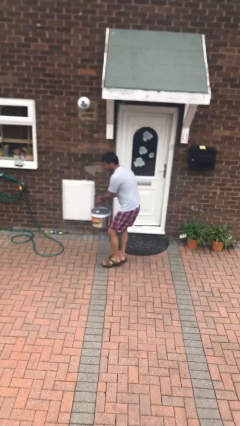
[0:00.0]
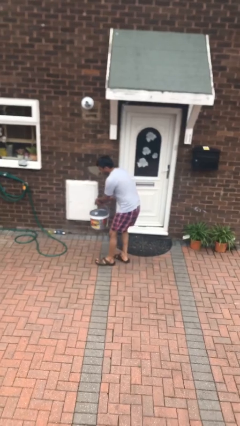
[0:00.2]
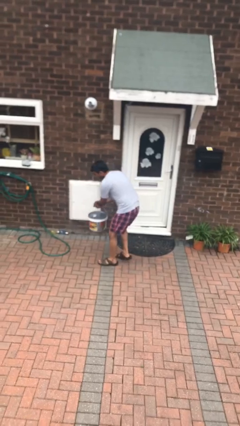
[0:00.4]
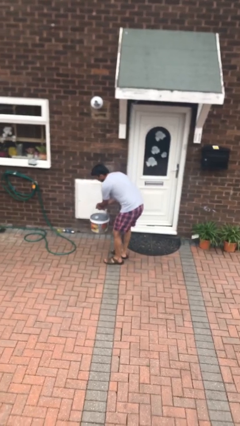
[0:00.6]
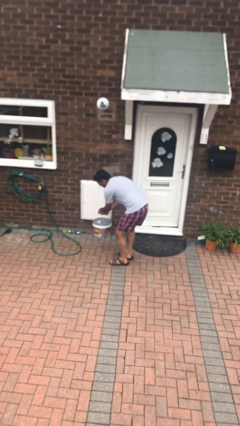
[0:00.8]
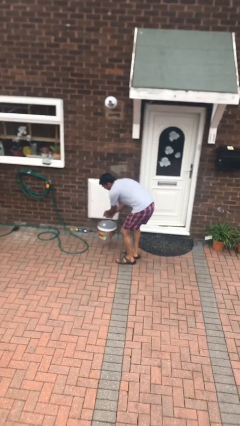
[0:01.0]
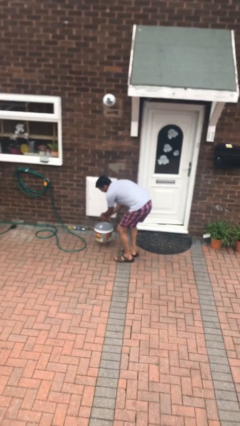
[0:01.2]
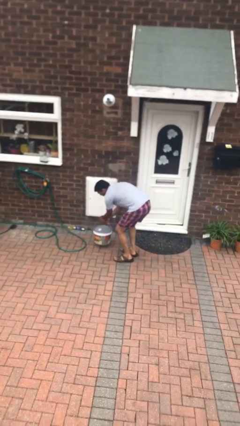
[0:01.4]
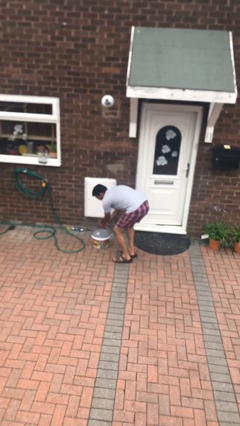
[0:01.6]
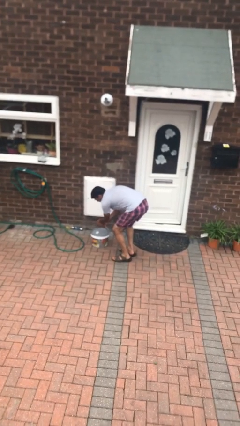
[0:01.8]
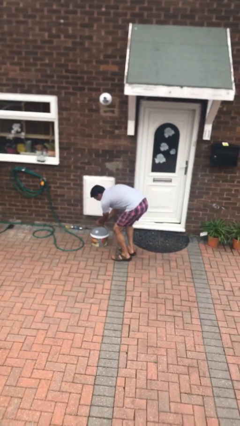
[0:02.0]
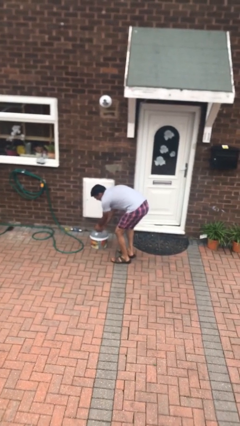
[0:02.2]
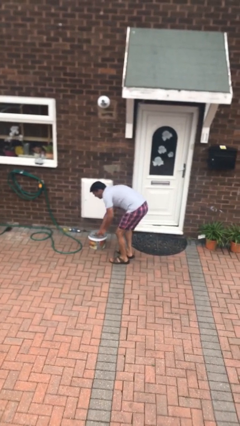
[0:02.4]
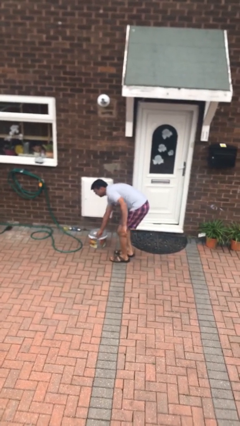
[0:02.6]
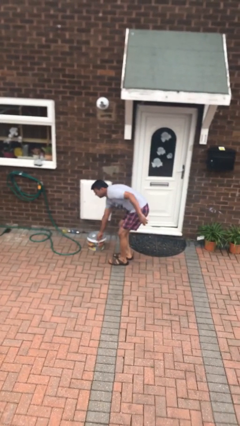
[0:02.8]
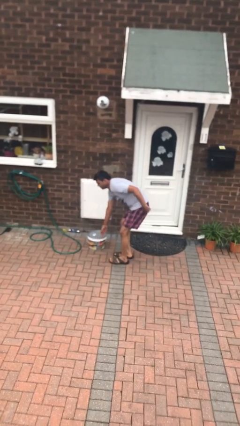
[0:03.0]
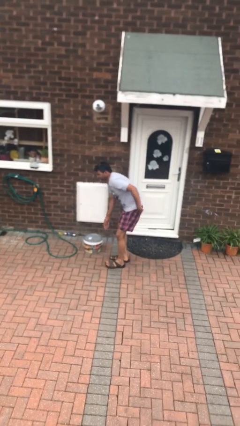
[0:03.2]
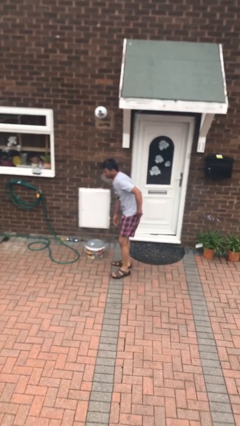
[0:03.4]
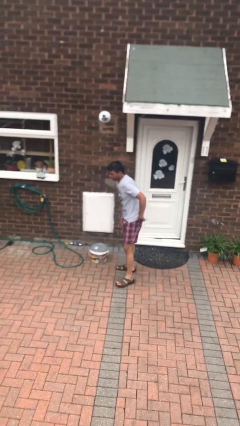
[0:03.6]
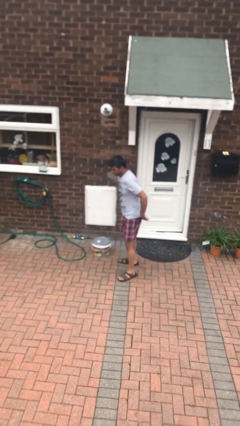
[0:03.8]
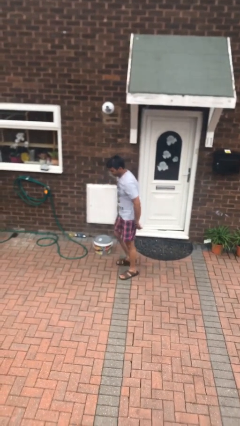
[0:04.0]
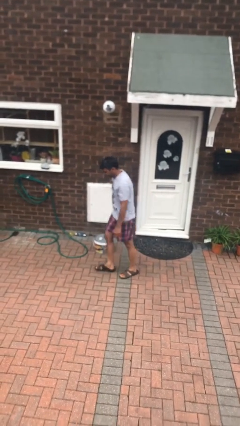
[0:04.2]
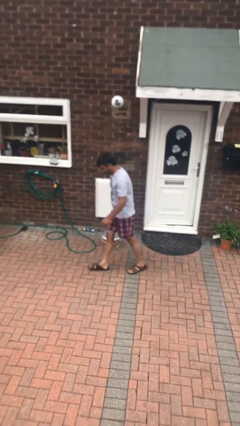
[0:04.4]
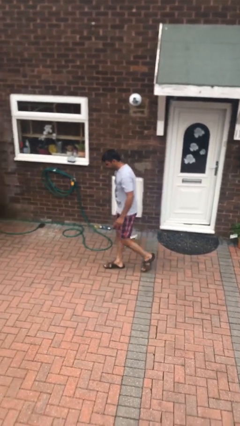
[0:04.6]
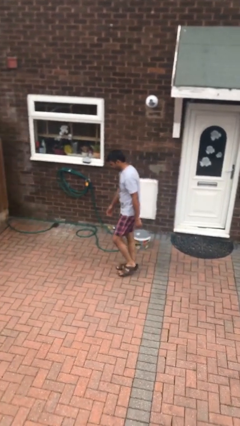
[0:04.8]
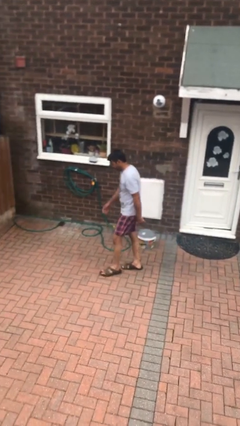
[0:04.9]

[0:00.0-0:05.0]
person puts down object on floor

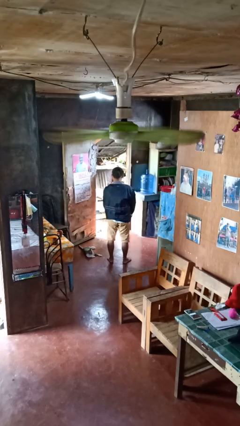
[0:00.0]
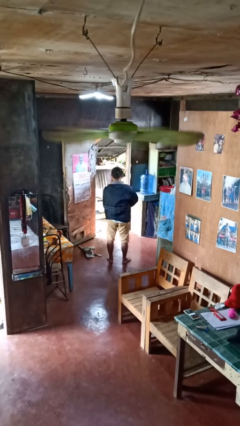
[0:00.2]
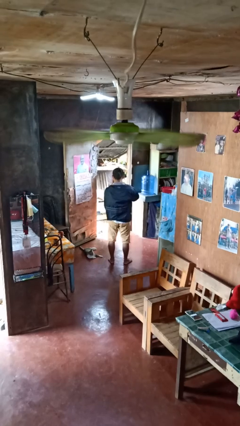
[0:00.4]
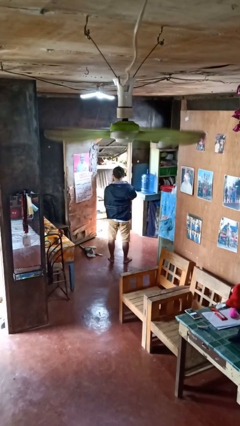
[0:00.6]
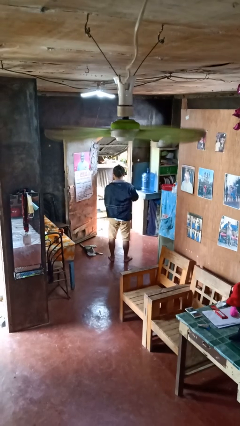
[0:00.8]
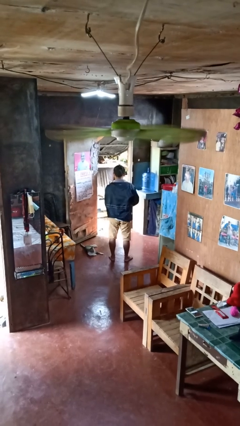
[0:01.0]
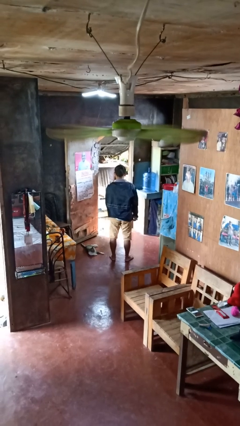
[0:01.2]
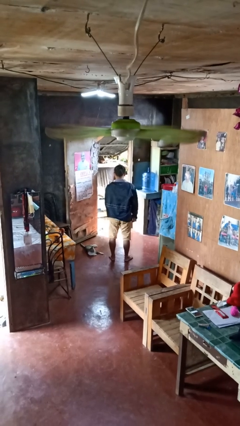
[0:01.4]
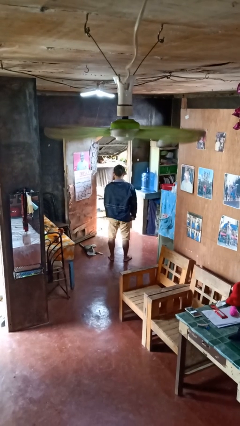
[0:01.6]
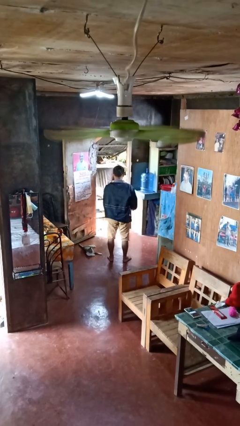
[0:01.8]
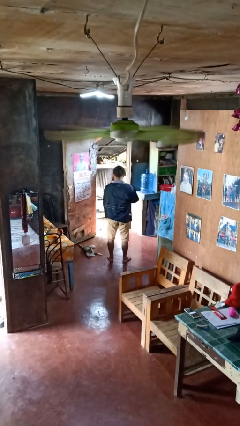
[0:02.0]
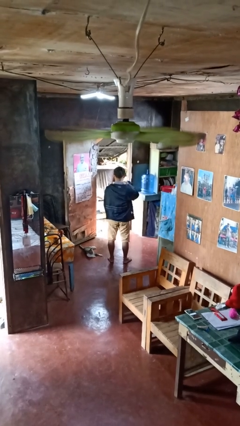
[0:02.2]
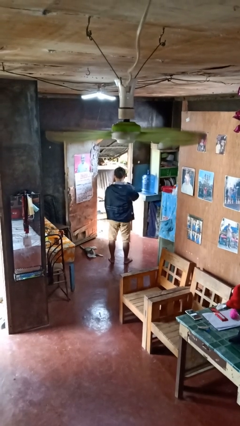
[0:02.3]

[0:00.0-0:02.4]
person zips up jacket

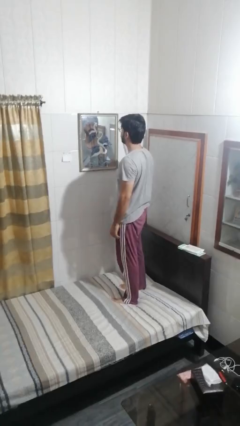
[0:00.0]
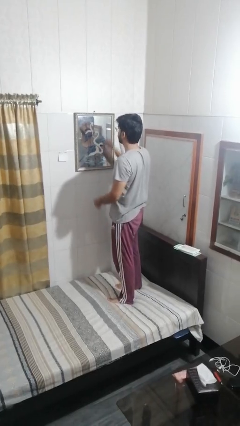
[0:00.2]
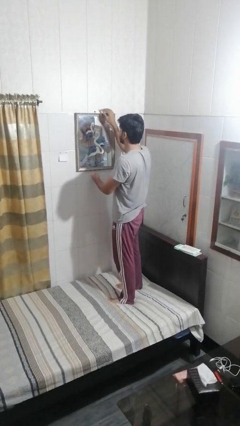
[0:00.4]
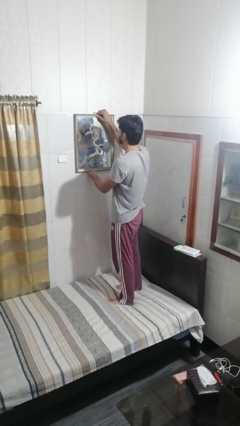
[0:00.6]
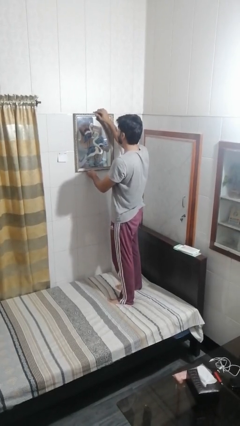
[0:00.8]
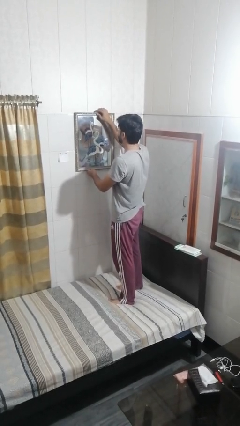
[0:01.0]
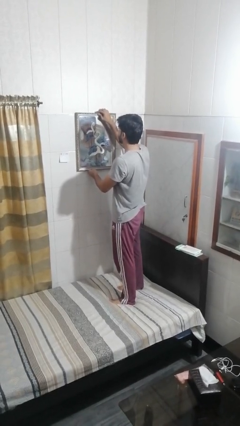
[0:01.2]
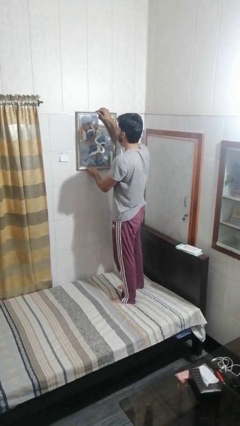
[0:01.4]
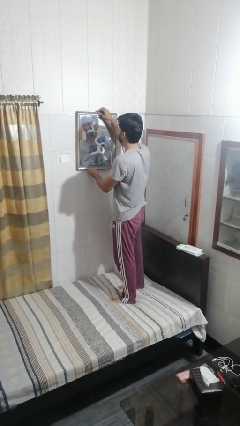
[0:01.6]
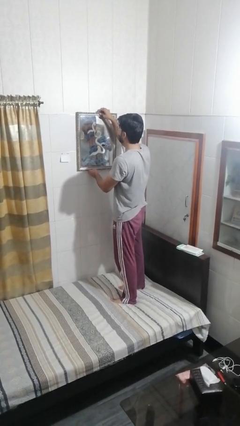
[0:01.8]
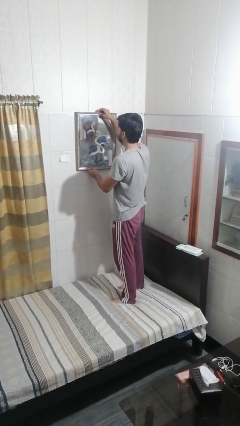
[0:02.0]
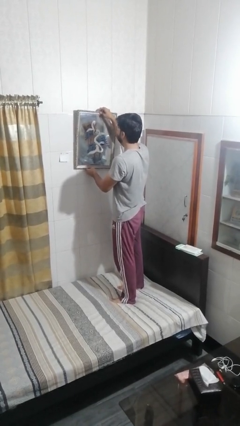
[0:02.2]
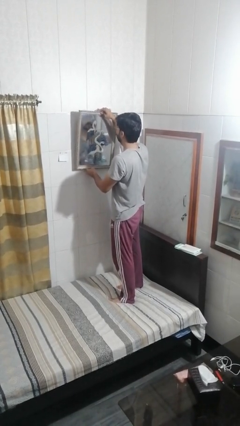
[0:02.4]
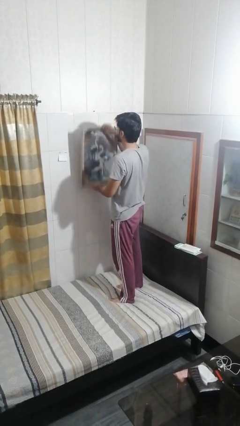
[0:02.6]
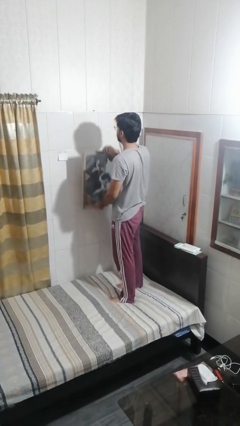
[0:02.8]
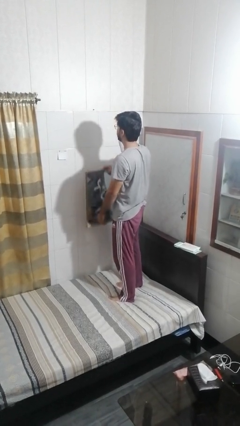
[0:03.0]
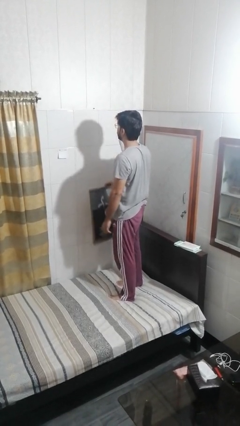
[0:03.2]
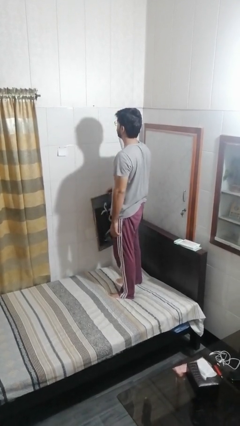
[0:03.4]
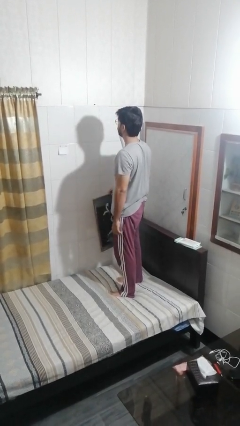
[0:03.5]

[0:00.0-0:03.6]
person takes down picture frame

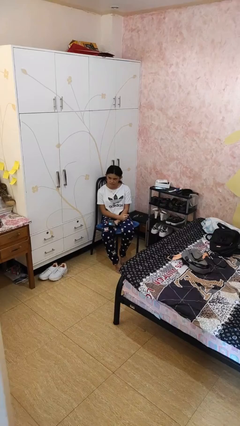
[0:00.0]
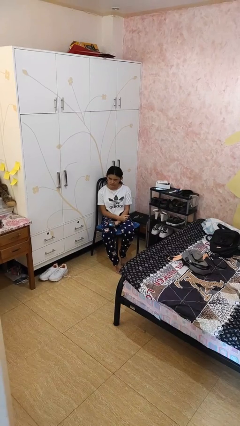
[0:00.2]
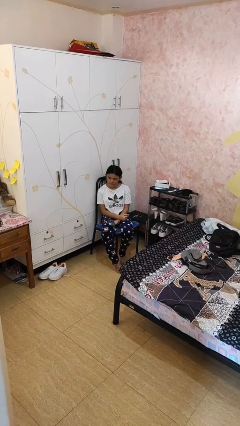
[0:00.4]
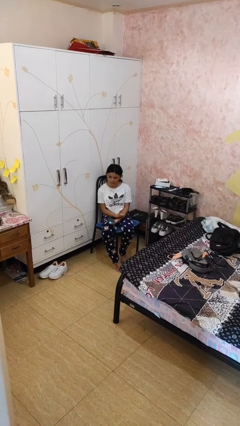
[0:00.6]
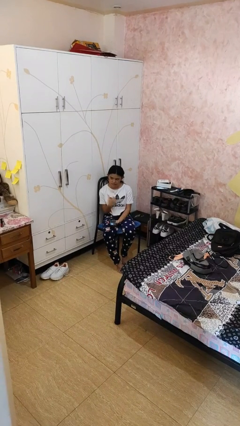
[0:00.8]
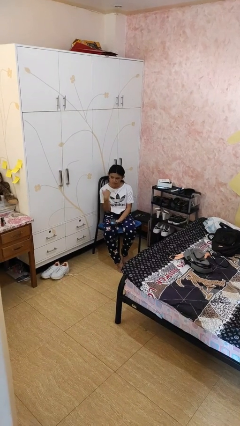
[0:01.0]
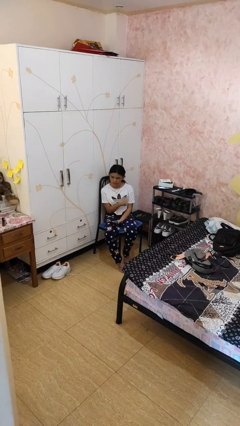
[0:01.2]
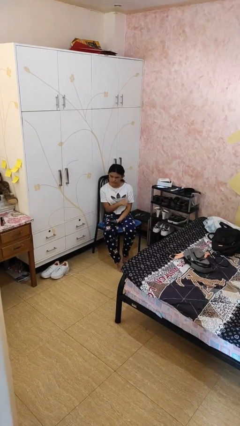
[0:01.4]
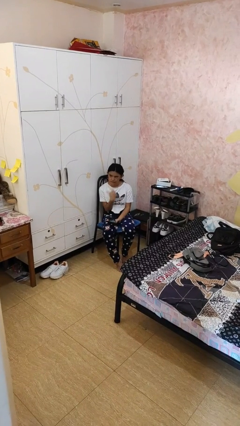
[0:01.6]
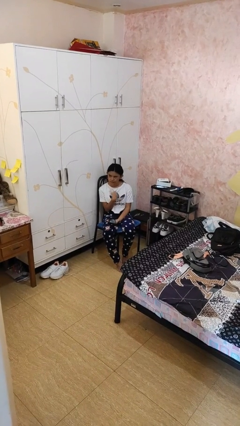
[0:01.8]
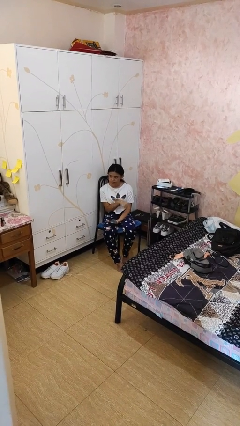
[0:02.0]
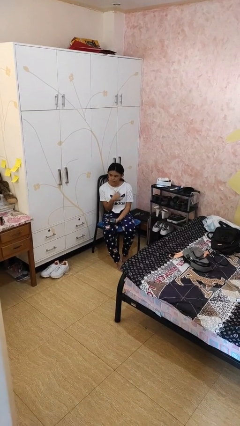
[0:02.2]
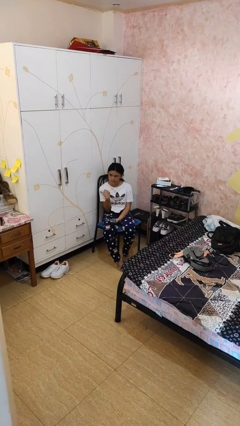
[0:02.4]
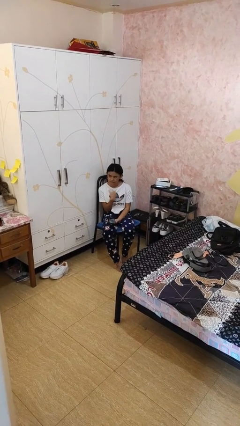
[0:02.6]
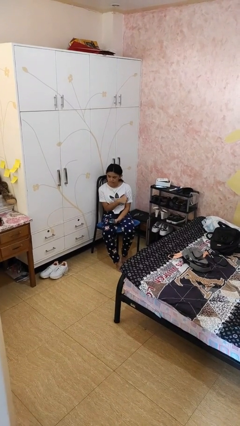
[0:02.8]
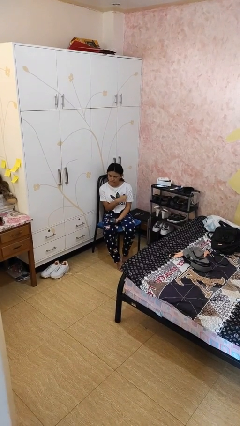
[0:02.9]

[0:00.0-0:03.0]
person gestures cut

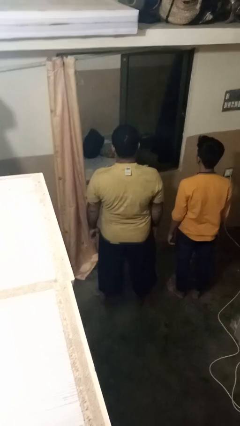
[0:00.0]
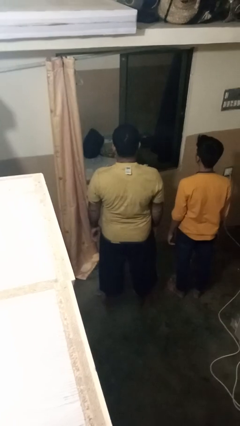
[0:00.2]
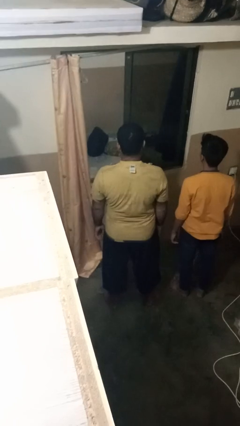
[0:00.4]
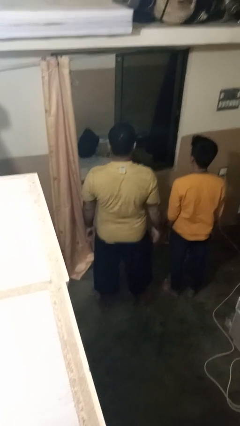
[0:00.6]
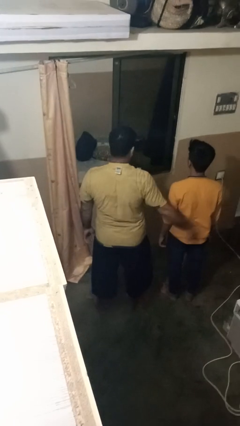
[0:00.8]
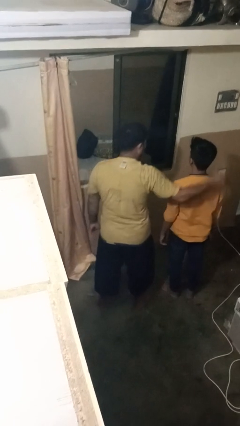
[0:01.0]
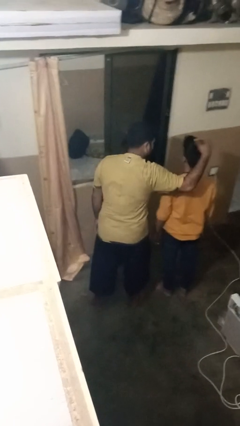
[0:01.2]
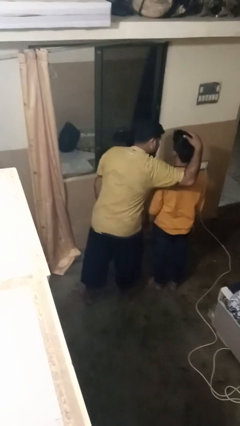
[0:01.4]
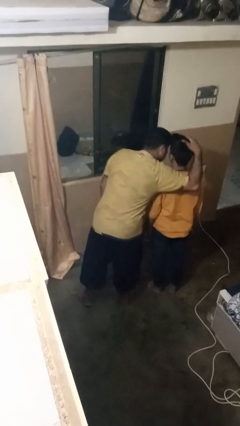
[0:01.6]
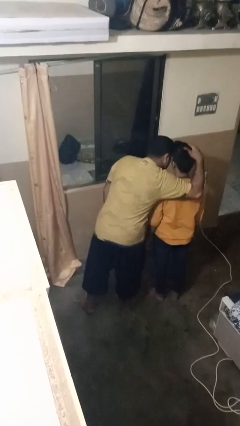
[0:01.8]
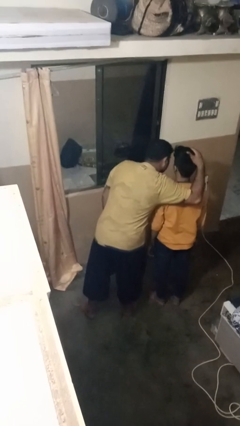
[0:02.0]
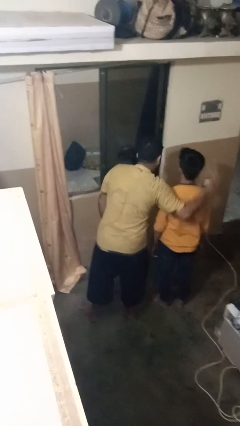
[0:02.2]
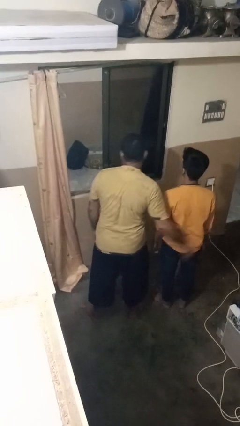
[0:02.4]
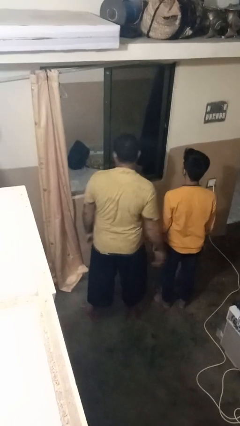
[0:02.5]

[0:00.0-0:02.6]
person kisses cheek of person

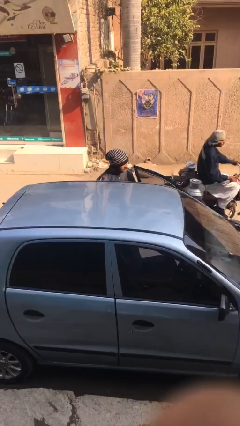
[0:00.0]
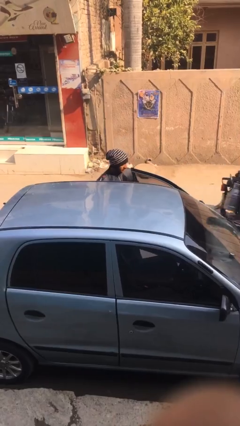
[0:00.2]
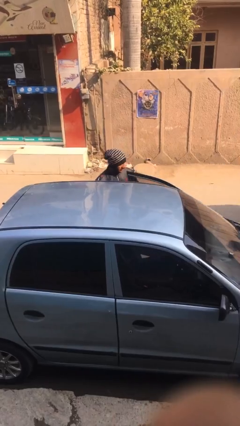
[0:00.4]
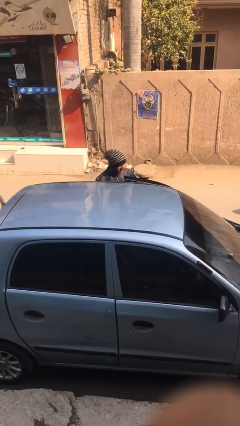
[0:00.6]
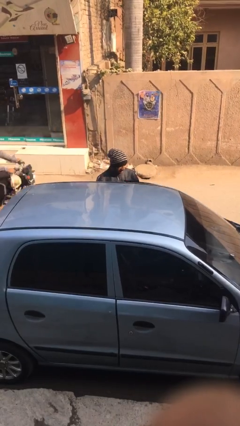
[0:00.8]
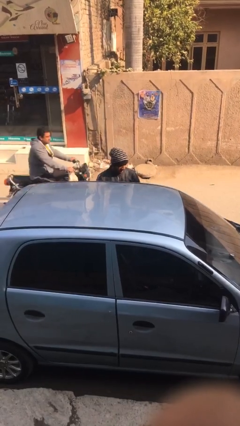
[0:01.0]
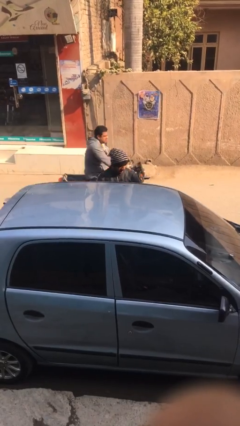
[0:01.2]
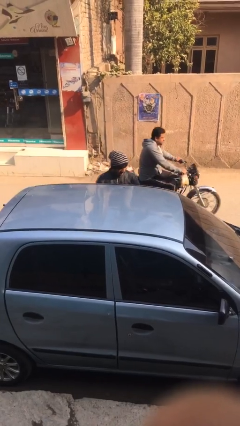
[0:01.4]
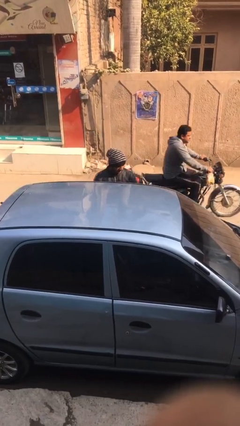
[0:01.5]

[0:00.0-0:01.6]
person closes car door
